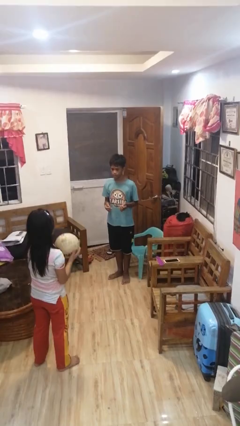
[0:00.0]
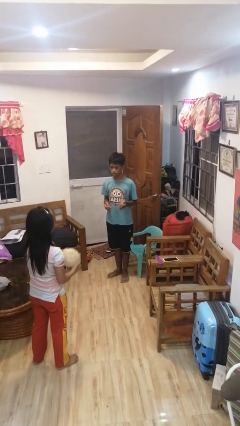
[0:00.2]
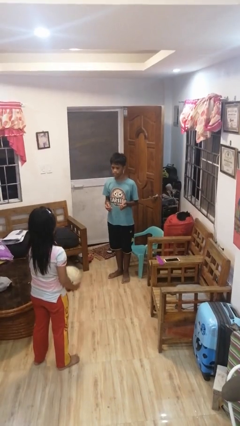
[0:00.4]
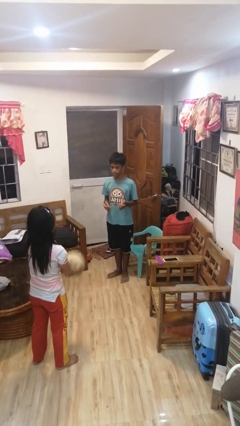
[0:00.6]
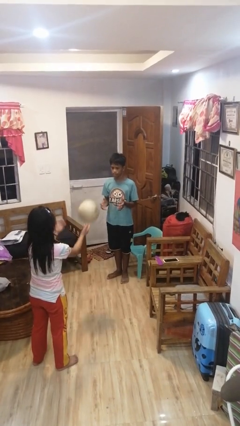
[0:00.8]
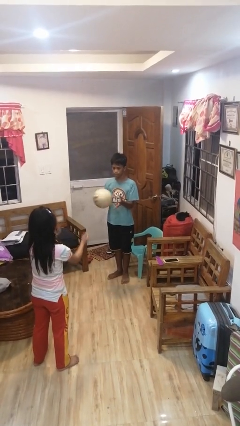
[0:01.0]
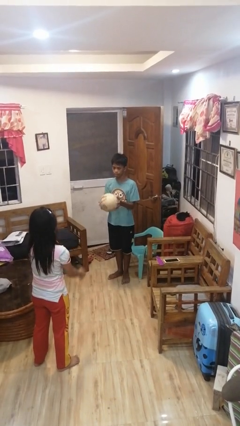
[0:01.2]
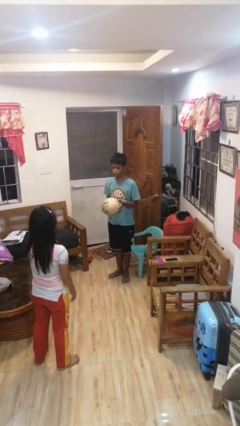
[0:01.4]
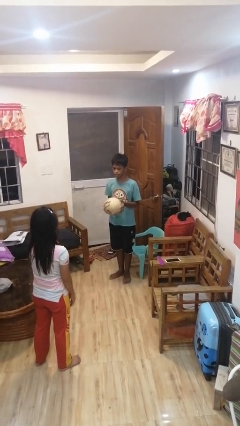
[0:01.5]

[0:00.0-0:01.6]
person catches object from person

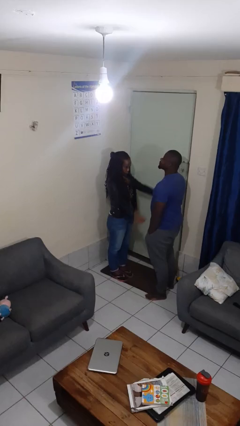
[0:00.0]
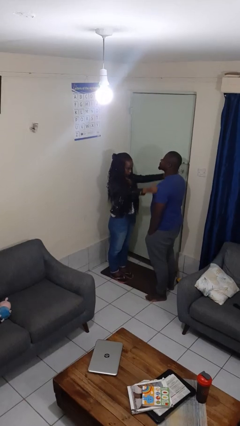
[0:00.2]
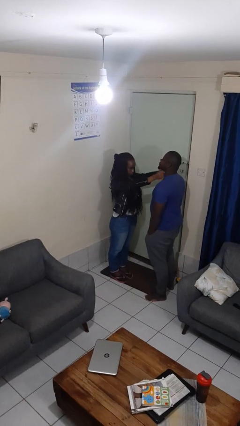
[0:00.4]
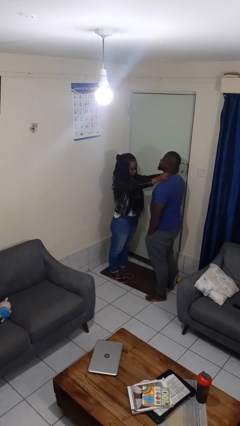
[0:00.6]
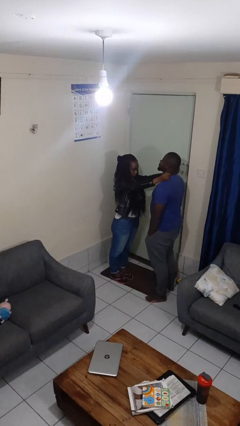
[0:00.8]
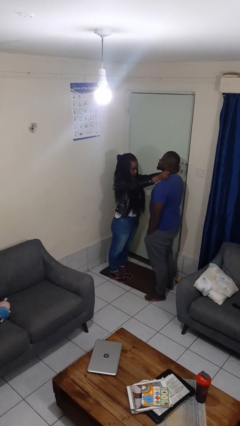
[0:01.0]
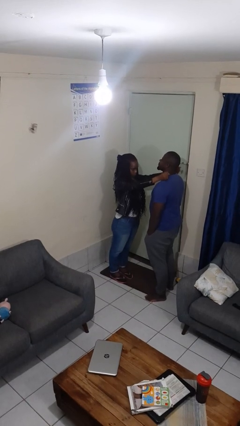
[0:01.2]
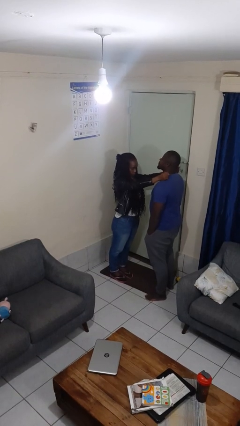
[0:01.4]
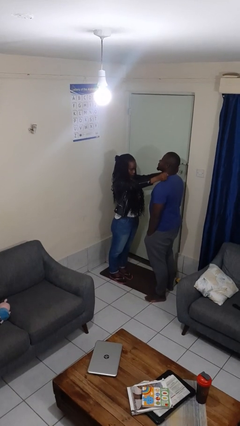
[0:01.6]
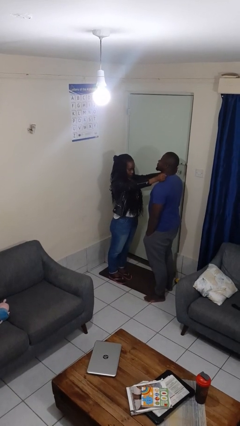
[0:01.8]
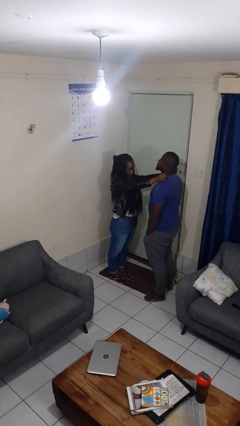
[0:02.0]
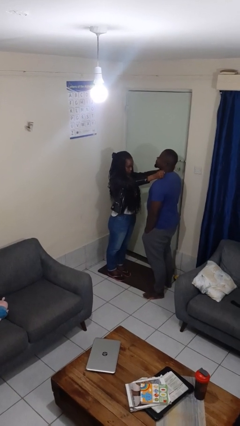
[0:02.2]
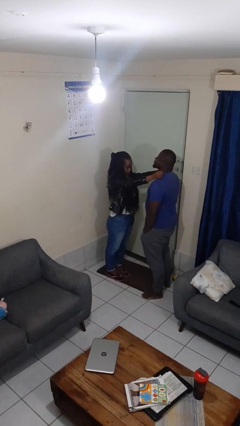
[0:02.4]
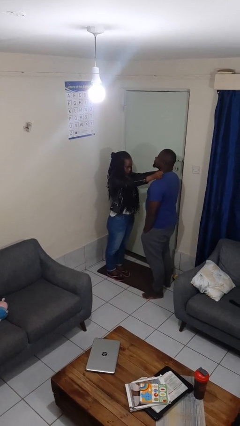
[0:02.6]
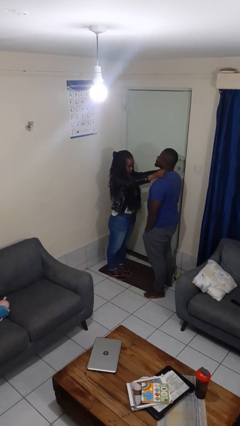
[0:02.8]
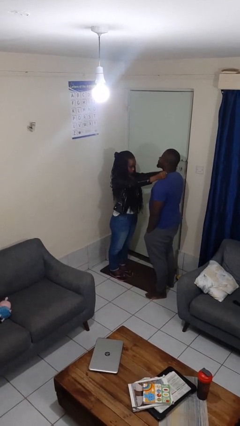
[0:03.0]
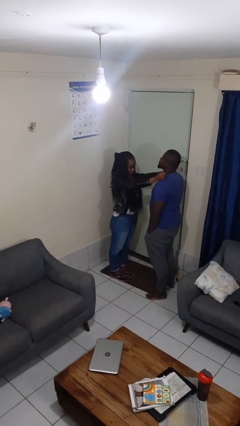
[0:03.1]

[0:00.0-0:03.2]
person pounds shoulders of person

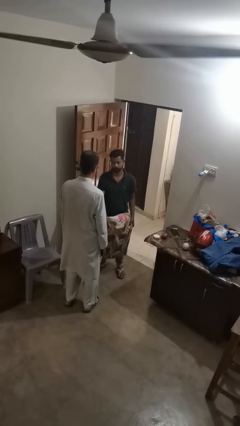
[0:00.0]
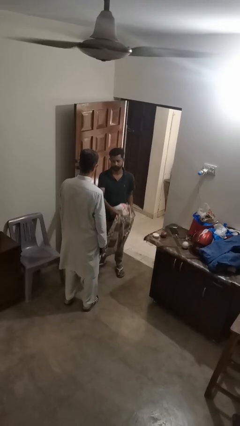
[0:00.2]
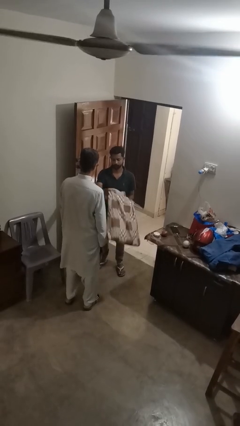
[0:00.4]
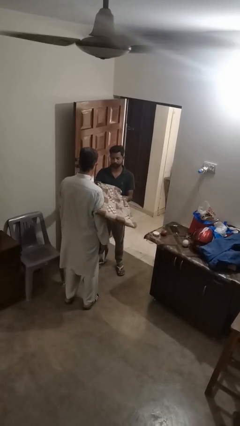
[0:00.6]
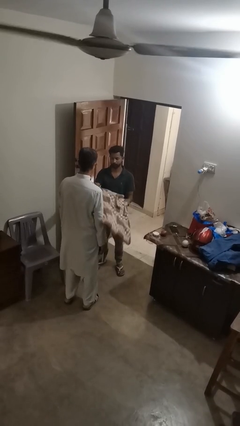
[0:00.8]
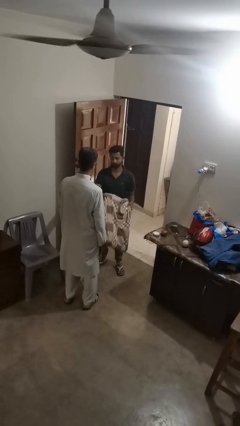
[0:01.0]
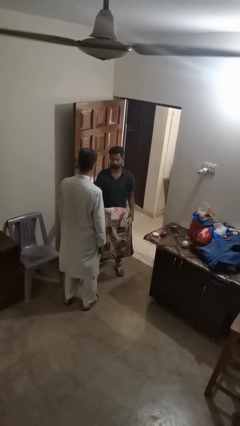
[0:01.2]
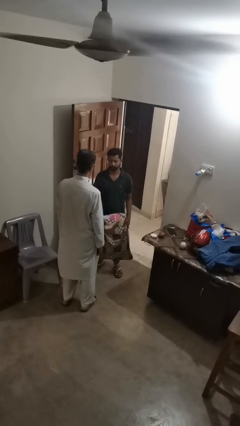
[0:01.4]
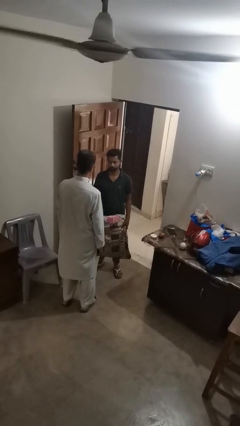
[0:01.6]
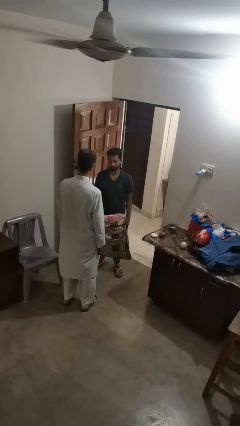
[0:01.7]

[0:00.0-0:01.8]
person hits person with pillow

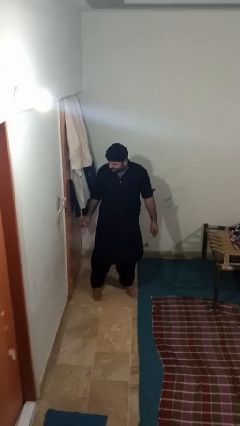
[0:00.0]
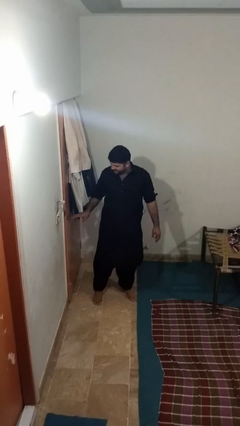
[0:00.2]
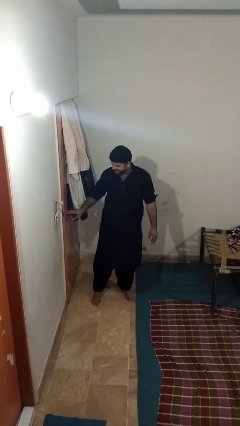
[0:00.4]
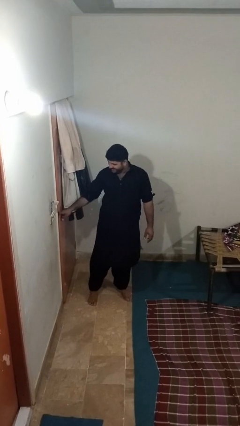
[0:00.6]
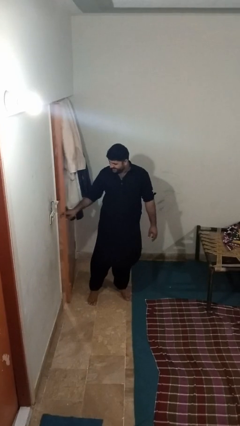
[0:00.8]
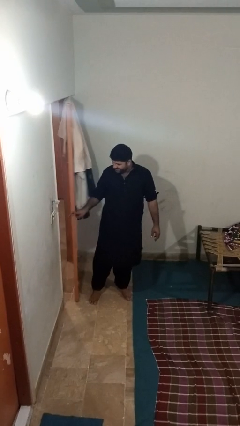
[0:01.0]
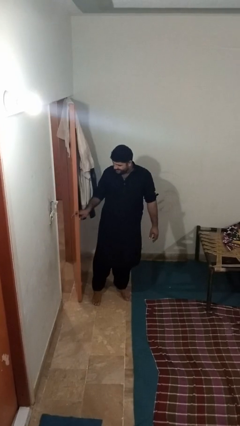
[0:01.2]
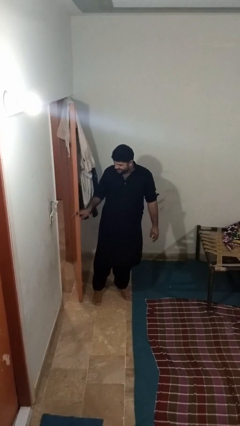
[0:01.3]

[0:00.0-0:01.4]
person opens facility door

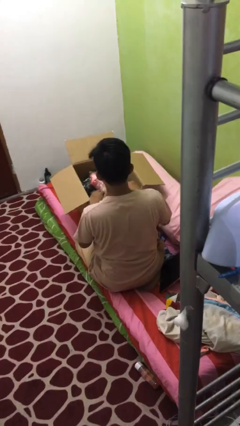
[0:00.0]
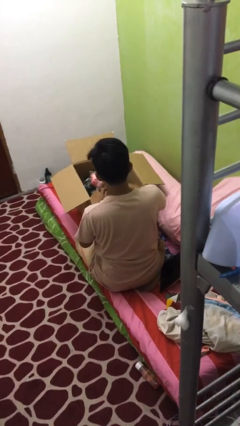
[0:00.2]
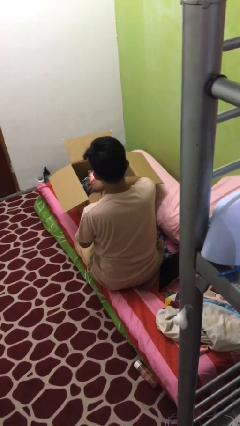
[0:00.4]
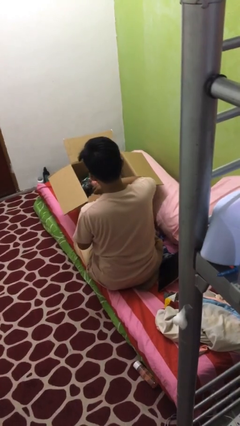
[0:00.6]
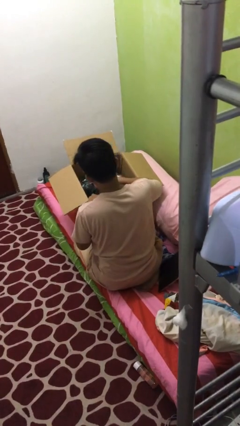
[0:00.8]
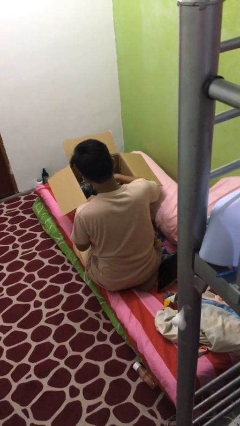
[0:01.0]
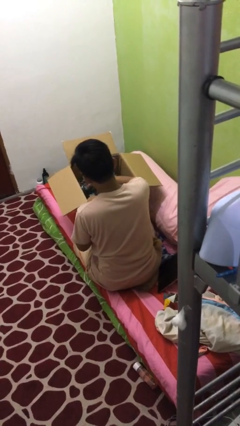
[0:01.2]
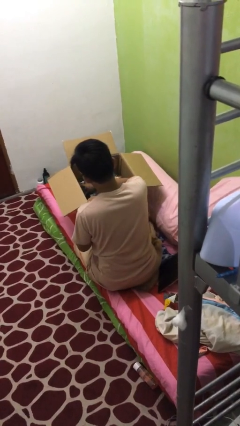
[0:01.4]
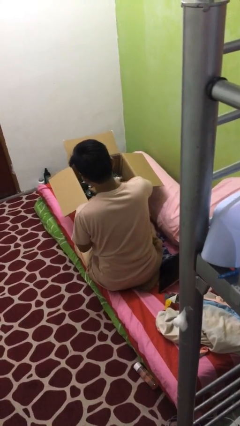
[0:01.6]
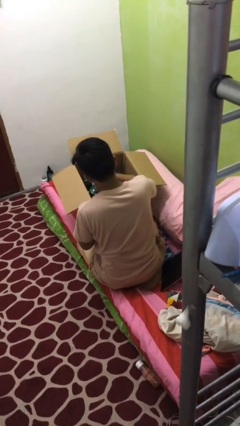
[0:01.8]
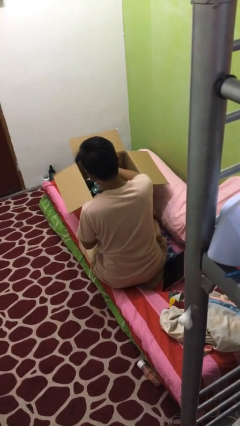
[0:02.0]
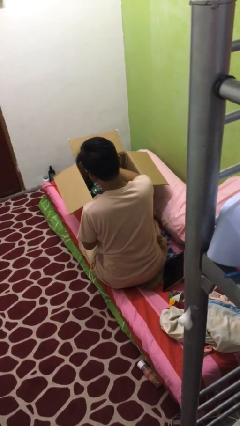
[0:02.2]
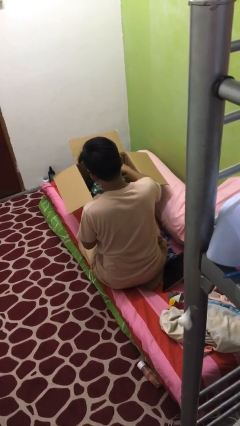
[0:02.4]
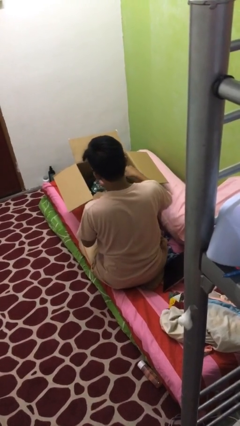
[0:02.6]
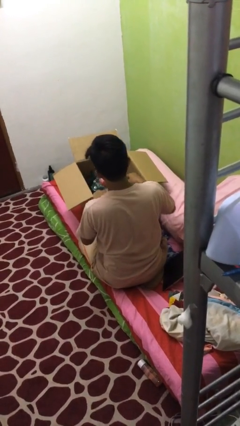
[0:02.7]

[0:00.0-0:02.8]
person searches in box

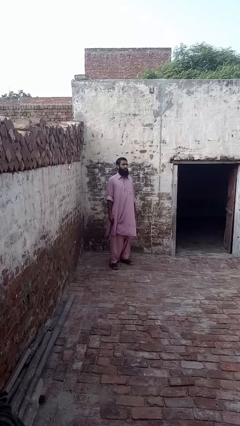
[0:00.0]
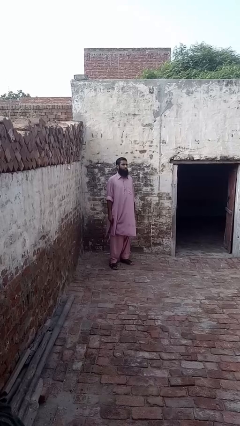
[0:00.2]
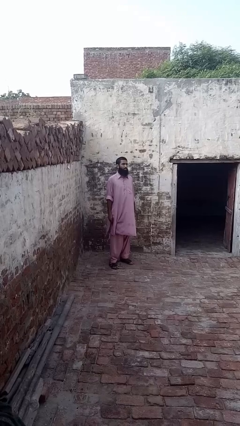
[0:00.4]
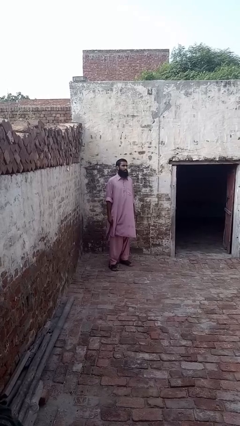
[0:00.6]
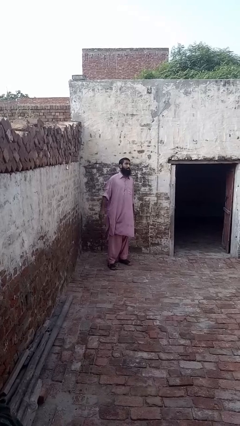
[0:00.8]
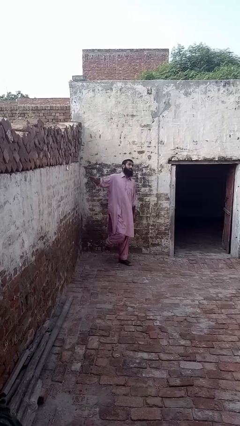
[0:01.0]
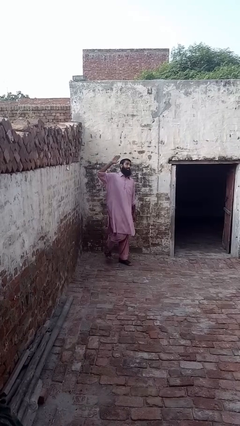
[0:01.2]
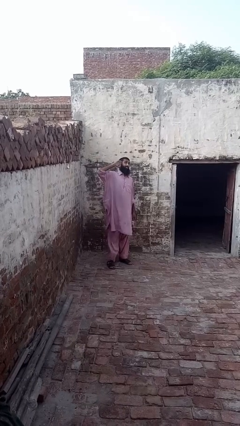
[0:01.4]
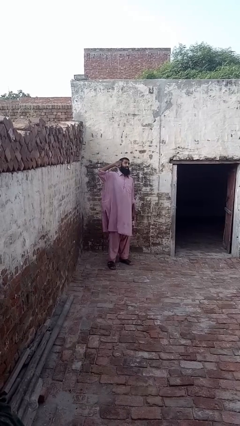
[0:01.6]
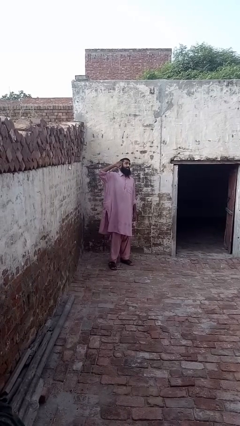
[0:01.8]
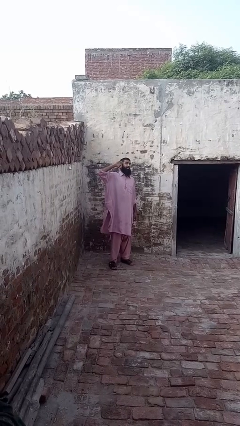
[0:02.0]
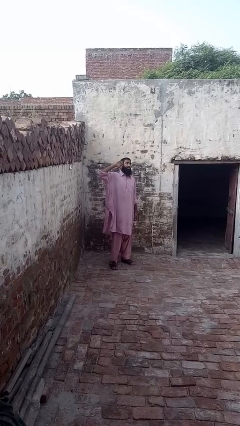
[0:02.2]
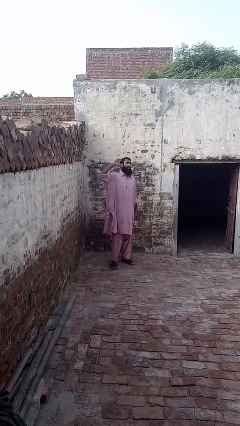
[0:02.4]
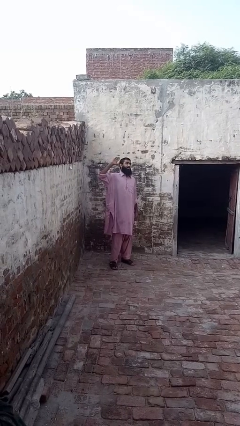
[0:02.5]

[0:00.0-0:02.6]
person salutes

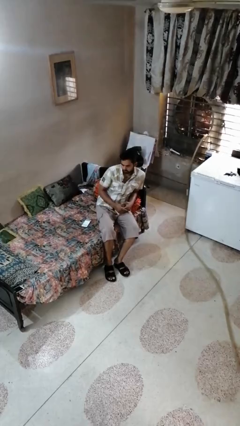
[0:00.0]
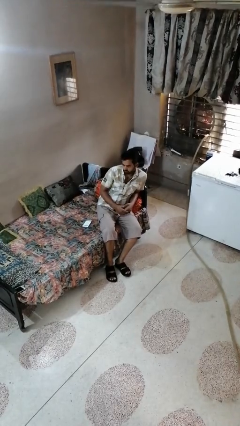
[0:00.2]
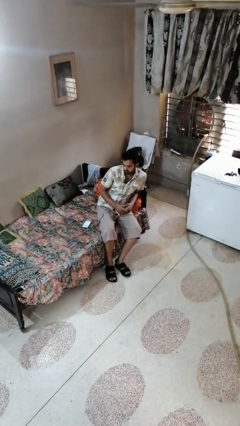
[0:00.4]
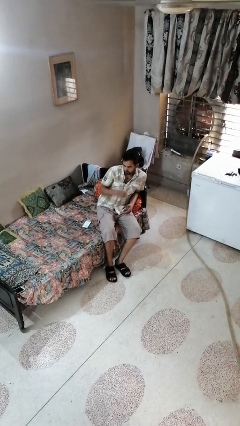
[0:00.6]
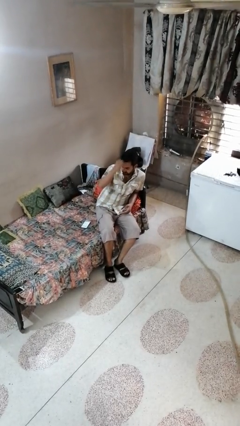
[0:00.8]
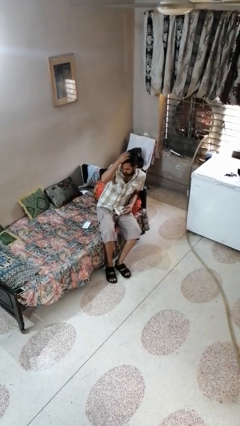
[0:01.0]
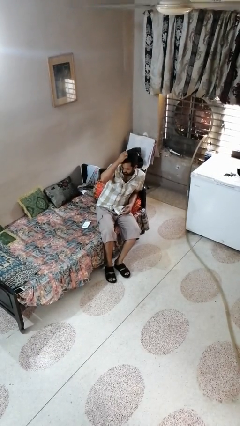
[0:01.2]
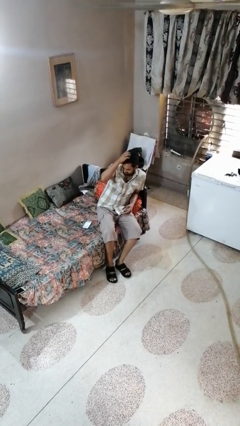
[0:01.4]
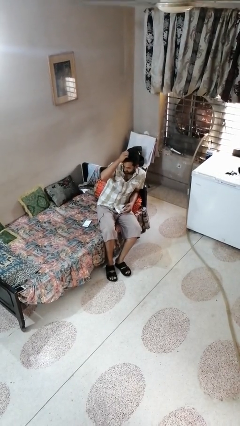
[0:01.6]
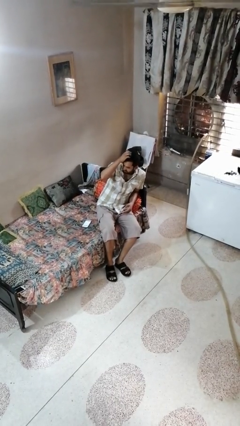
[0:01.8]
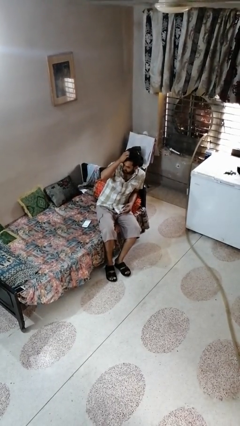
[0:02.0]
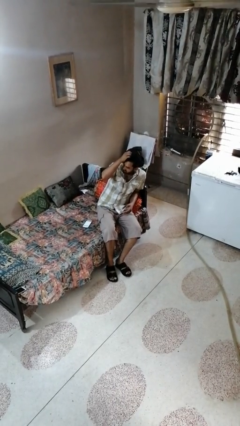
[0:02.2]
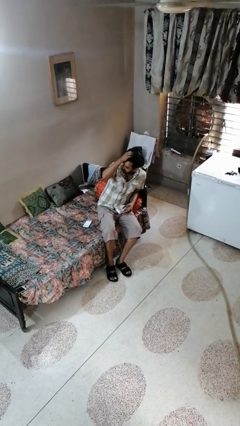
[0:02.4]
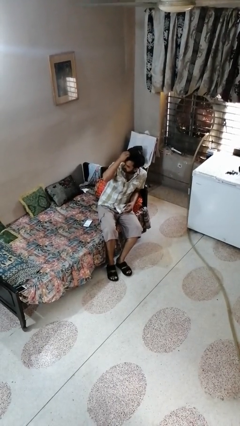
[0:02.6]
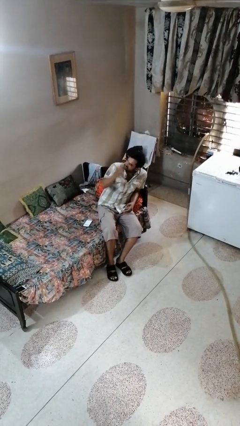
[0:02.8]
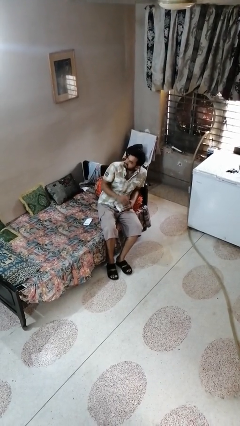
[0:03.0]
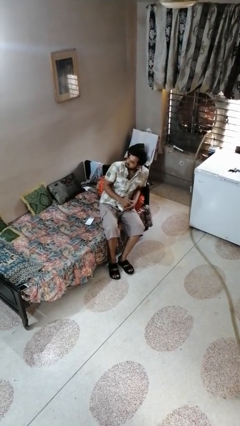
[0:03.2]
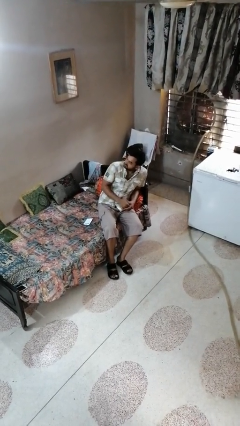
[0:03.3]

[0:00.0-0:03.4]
person scratches face
